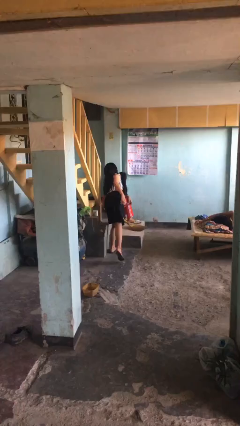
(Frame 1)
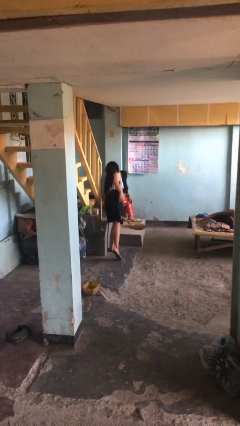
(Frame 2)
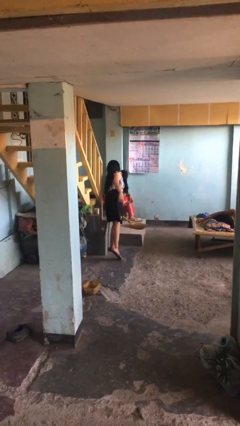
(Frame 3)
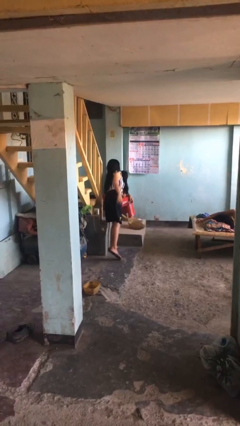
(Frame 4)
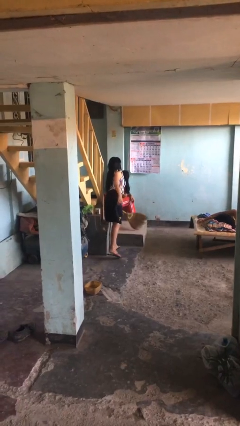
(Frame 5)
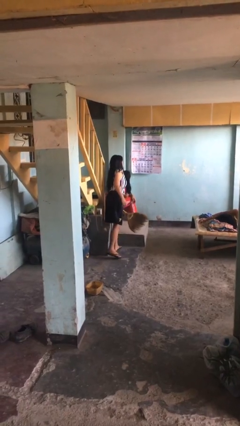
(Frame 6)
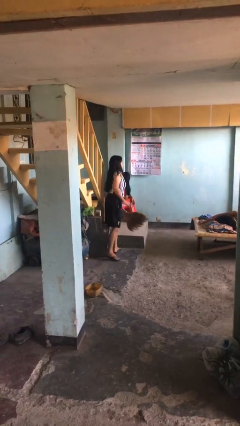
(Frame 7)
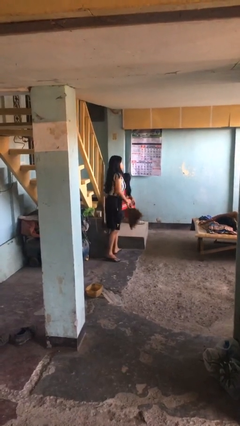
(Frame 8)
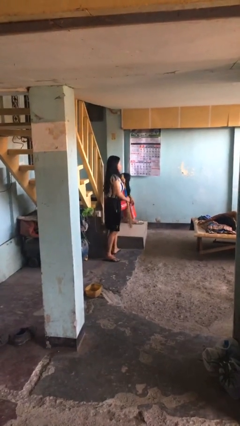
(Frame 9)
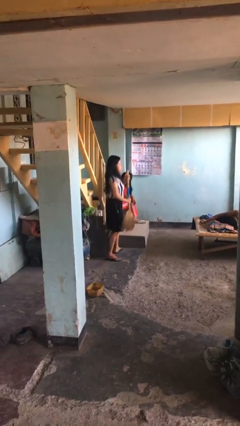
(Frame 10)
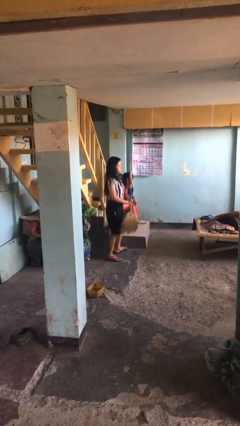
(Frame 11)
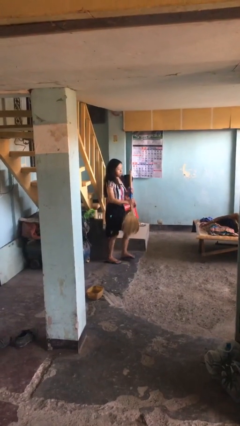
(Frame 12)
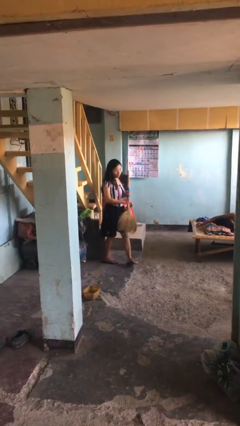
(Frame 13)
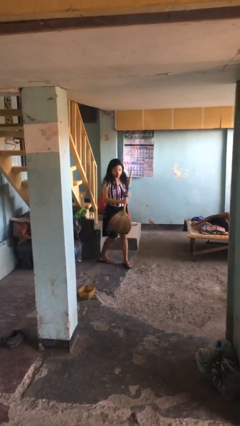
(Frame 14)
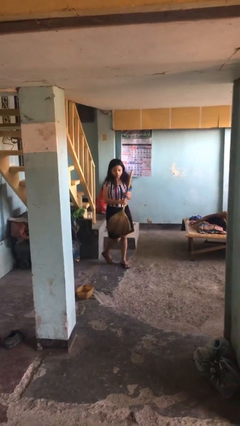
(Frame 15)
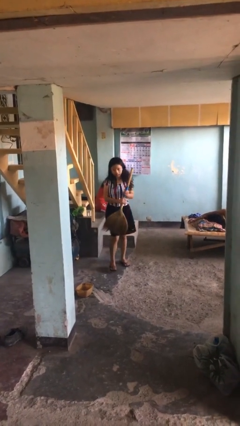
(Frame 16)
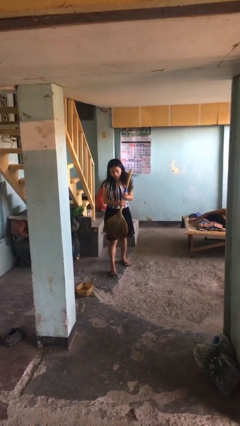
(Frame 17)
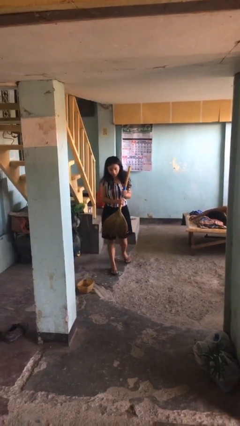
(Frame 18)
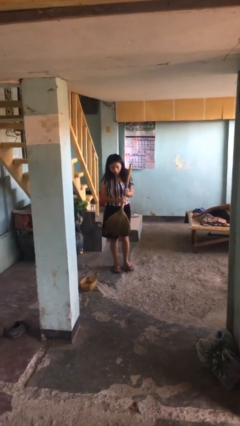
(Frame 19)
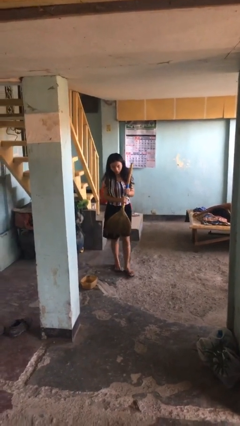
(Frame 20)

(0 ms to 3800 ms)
person steals object from person

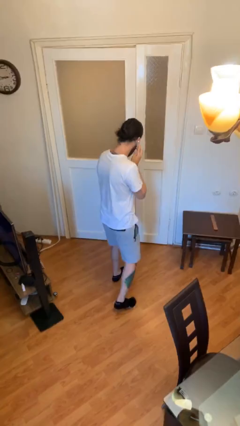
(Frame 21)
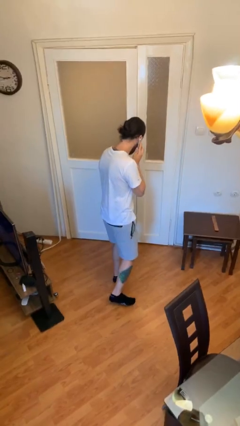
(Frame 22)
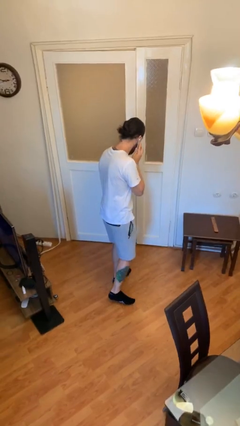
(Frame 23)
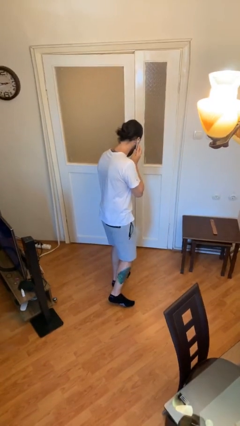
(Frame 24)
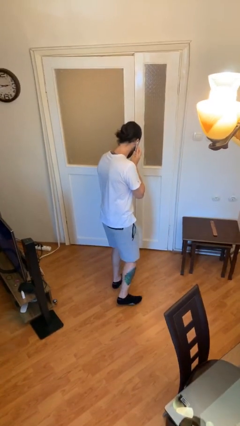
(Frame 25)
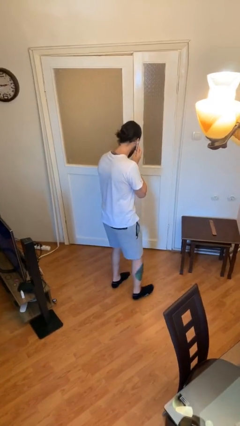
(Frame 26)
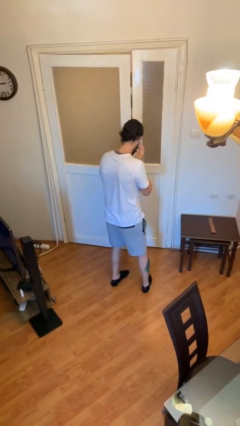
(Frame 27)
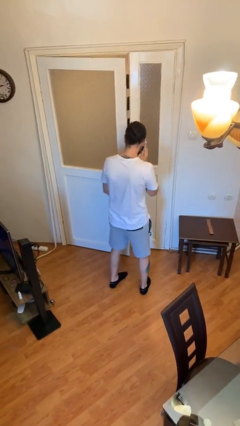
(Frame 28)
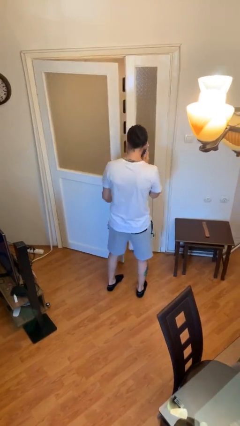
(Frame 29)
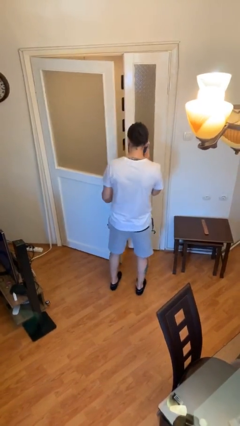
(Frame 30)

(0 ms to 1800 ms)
person opens facility door

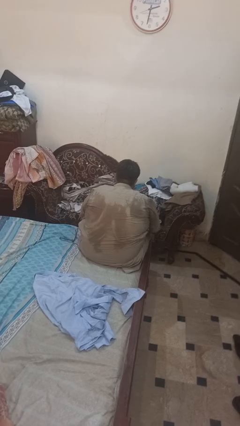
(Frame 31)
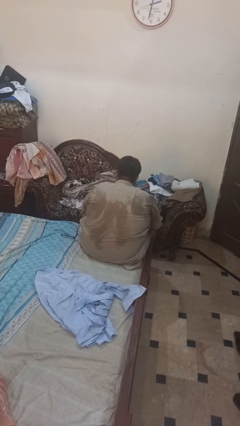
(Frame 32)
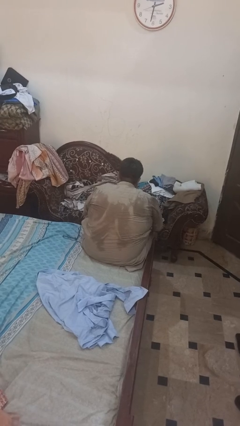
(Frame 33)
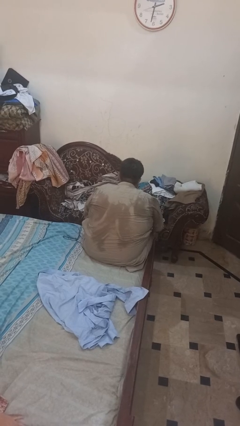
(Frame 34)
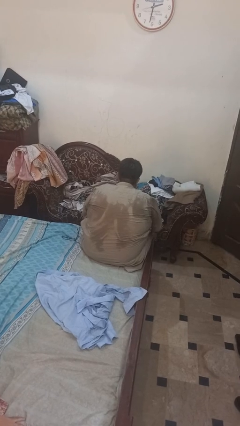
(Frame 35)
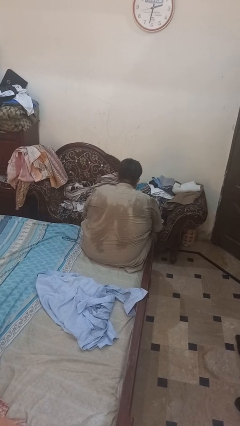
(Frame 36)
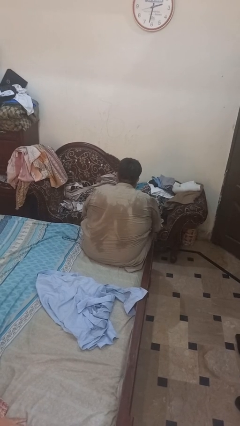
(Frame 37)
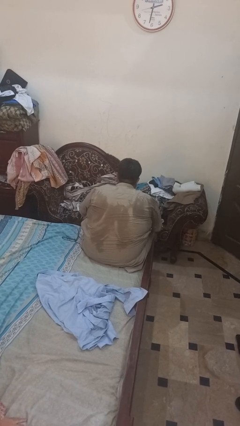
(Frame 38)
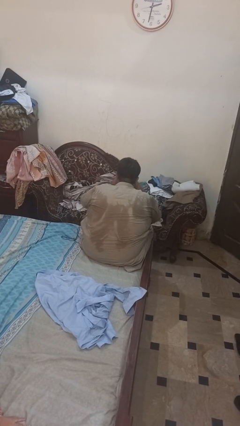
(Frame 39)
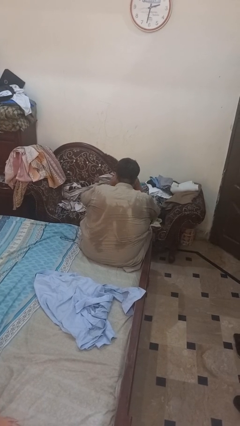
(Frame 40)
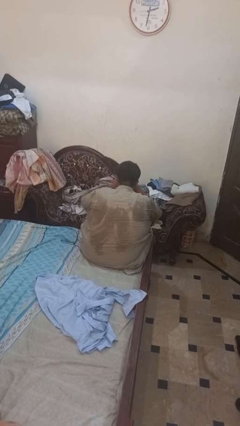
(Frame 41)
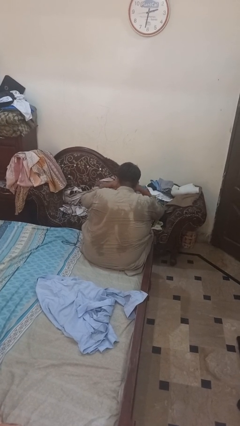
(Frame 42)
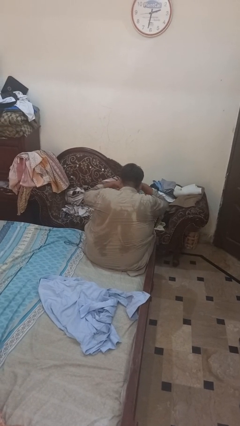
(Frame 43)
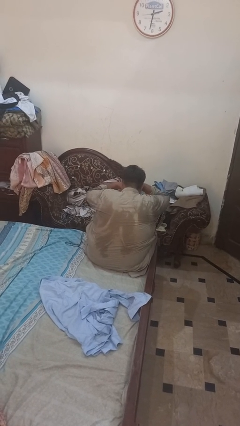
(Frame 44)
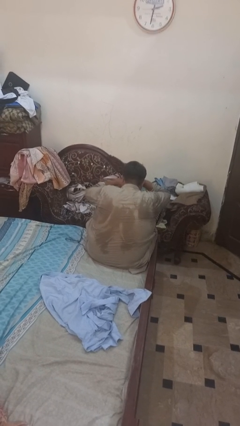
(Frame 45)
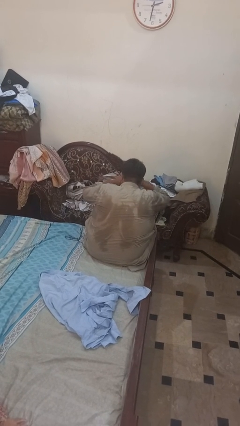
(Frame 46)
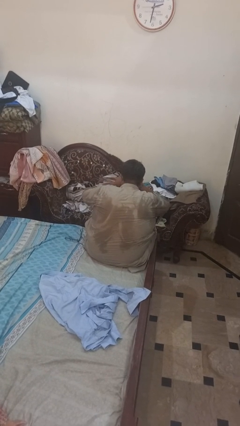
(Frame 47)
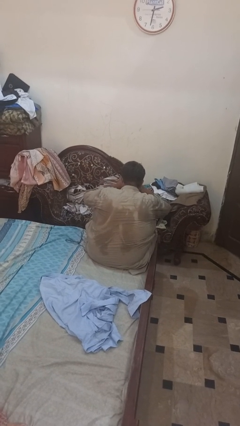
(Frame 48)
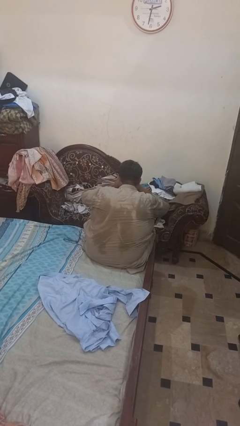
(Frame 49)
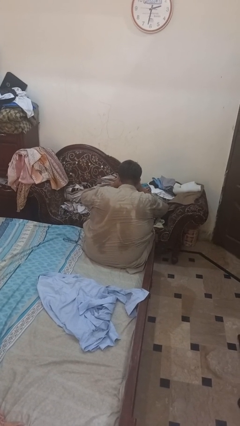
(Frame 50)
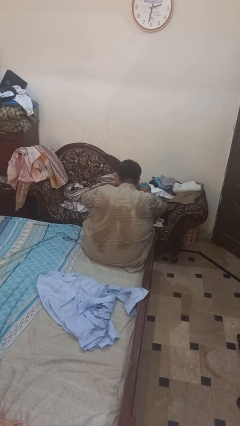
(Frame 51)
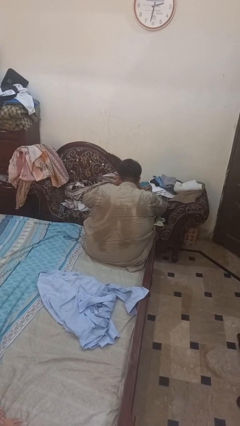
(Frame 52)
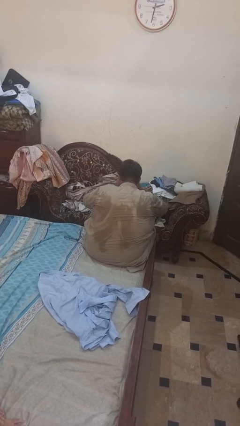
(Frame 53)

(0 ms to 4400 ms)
person rubs eyes

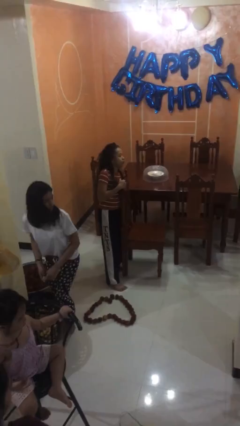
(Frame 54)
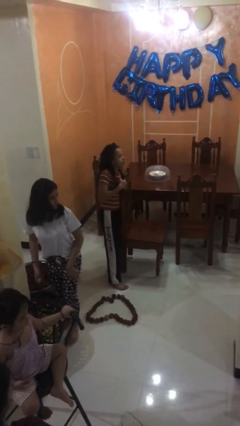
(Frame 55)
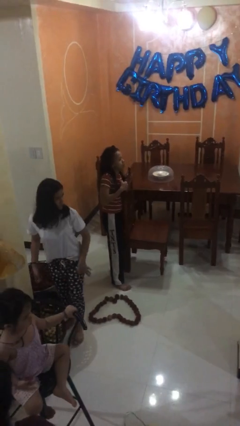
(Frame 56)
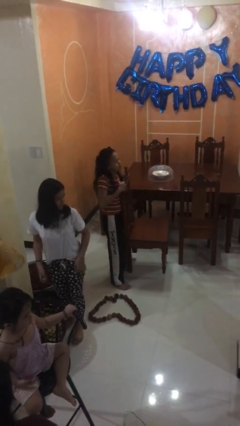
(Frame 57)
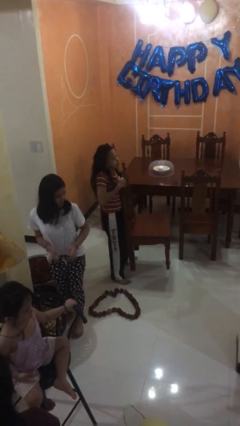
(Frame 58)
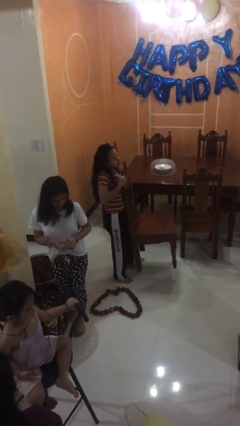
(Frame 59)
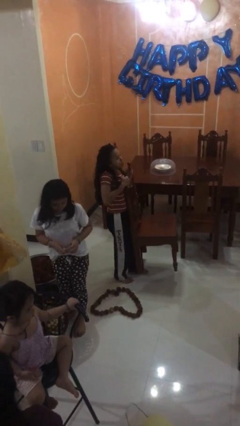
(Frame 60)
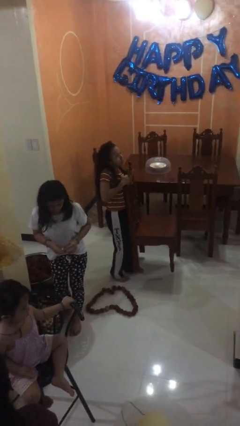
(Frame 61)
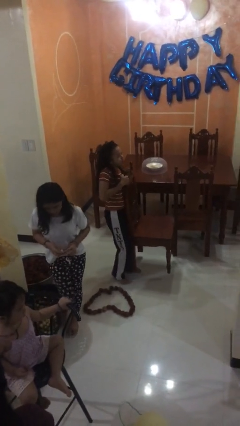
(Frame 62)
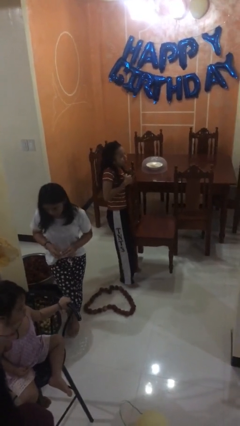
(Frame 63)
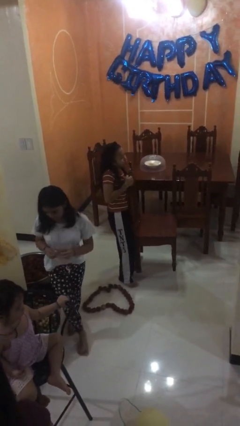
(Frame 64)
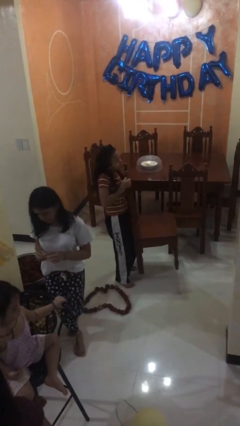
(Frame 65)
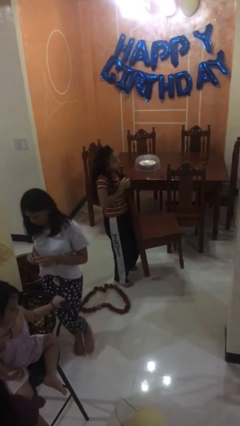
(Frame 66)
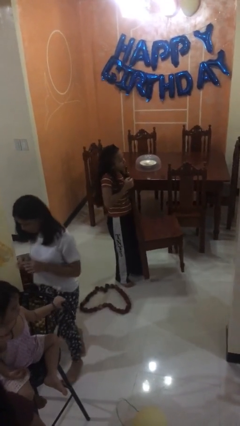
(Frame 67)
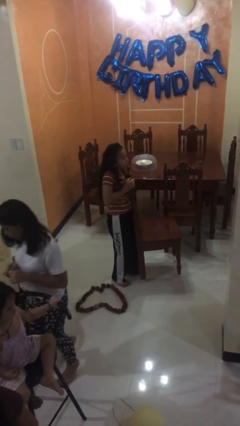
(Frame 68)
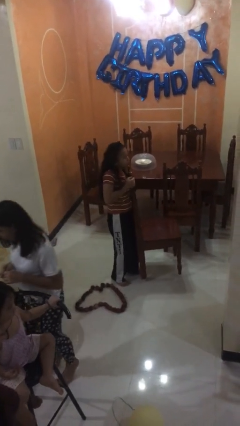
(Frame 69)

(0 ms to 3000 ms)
person carries heavy object

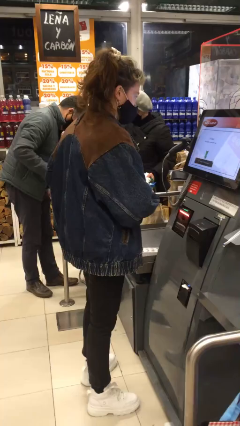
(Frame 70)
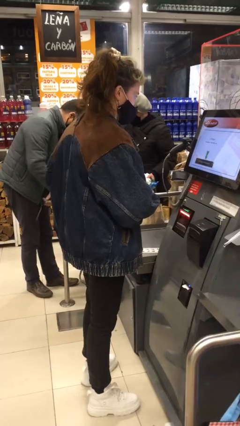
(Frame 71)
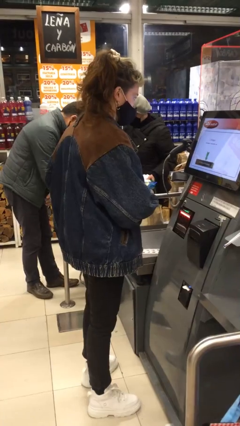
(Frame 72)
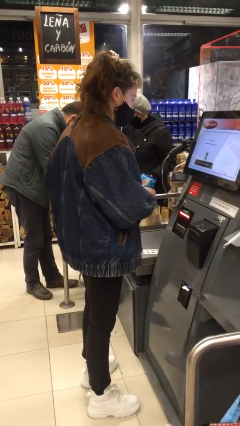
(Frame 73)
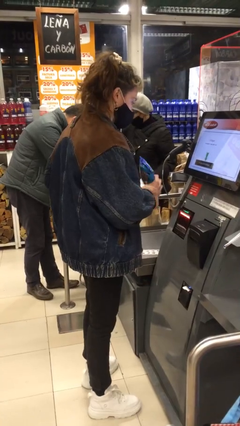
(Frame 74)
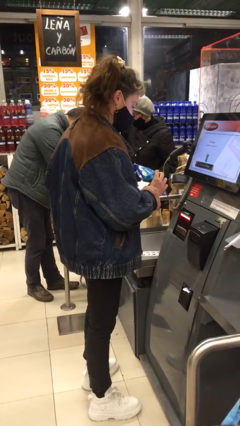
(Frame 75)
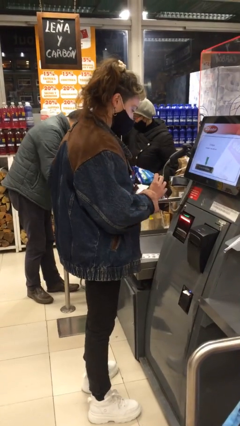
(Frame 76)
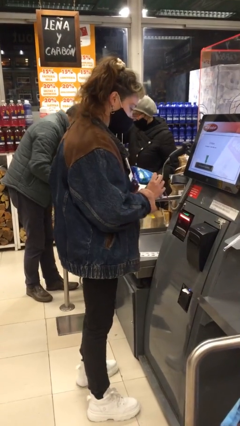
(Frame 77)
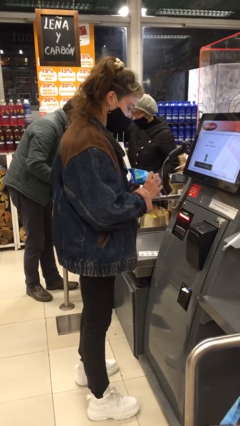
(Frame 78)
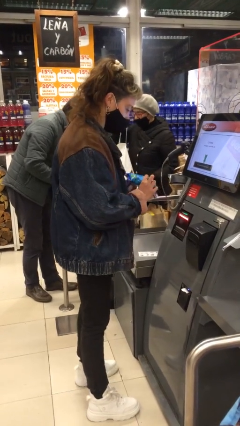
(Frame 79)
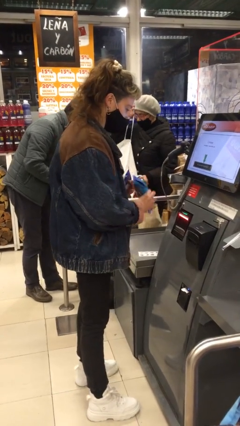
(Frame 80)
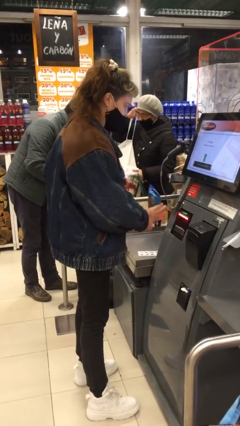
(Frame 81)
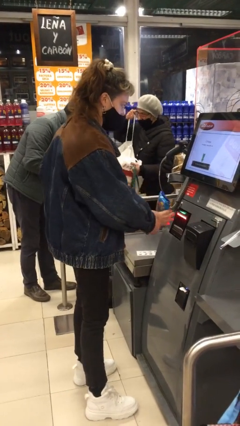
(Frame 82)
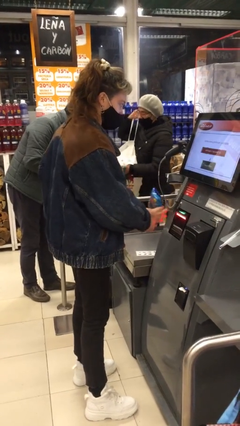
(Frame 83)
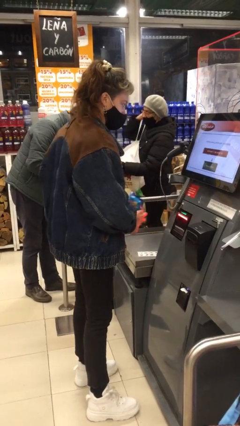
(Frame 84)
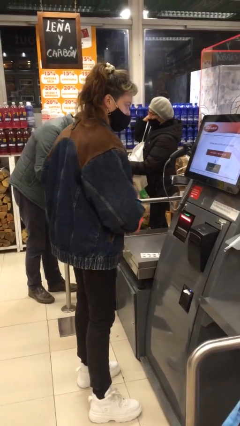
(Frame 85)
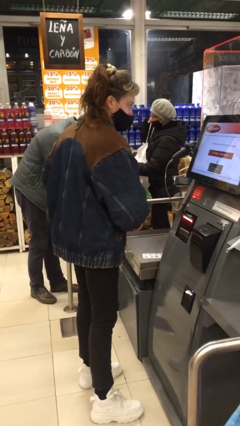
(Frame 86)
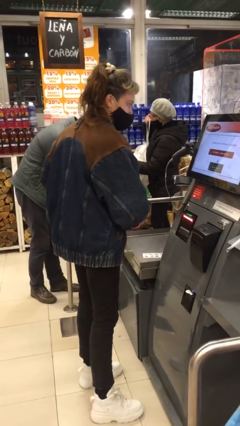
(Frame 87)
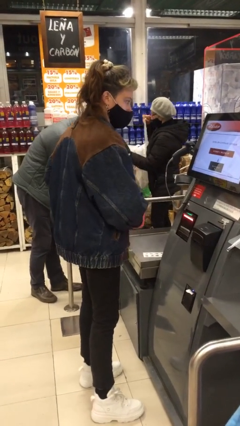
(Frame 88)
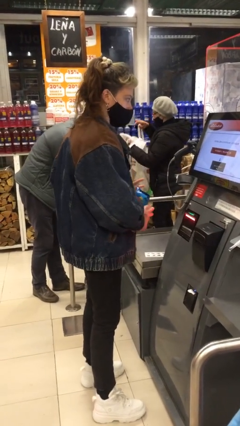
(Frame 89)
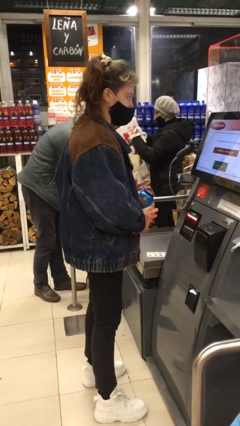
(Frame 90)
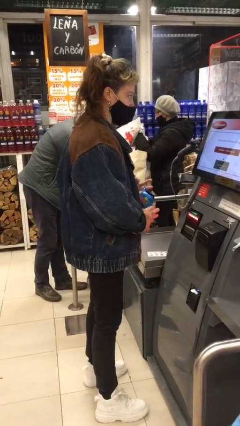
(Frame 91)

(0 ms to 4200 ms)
person purchases from machine

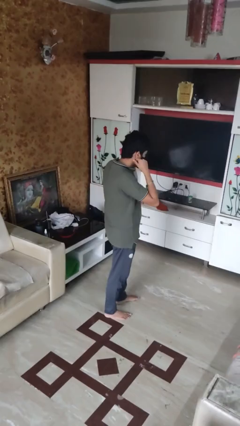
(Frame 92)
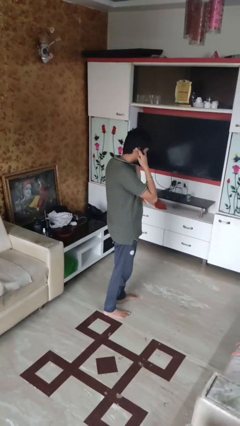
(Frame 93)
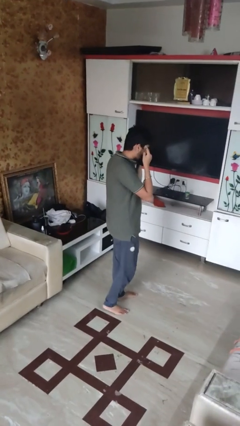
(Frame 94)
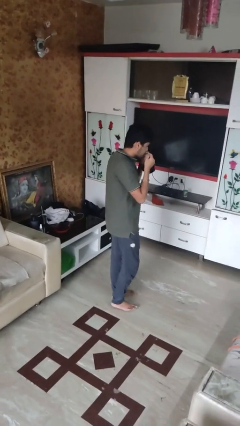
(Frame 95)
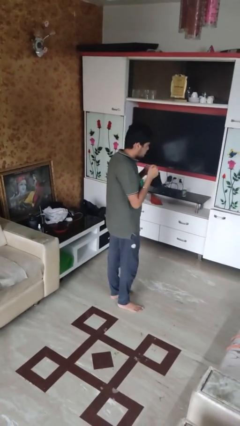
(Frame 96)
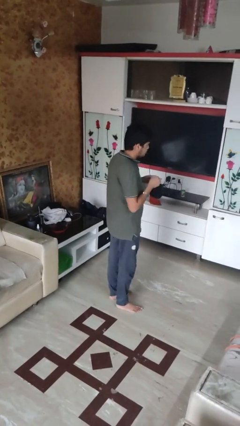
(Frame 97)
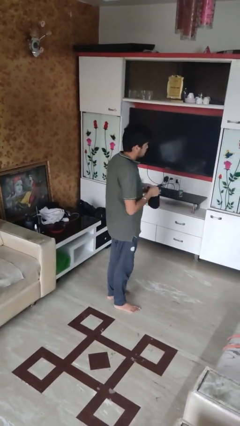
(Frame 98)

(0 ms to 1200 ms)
person takes off facemask
